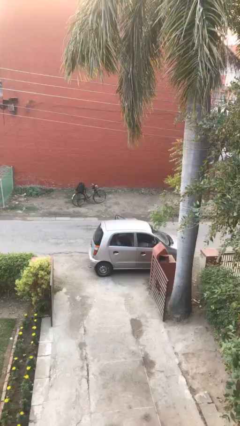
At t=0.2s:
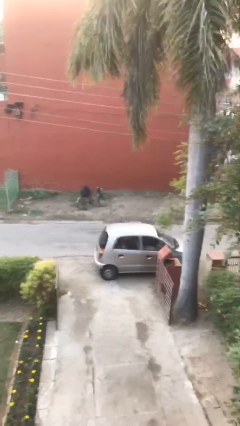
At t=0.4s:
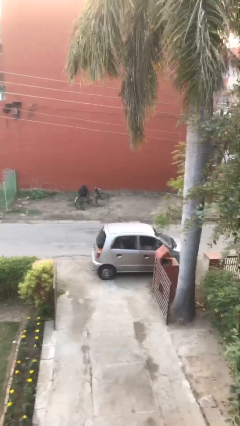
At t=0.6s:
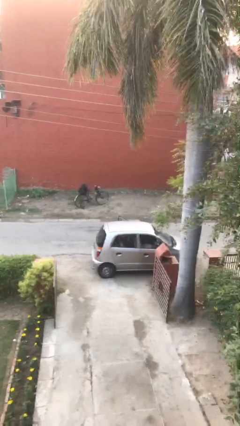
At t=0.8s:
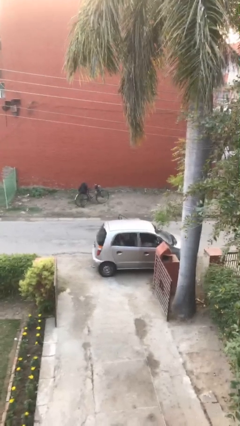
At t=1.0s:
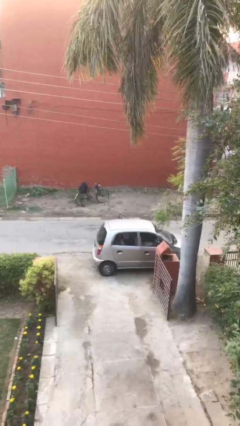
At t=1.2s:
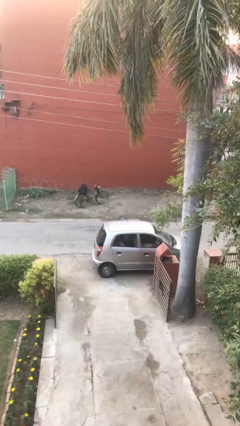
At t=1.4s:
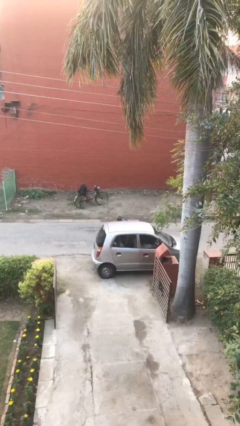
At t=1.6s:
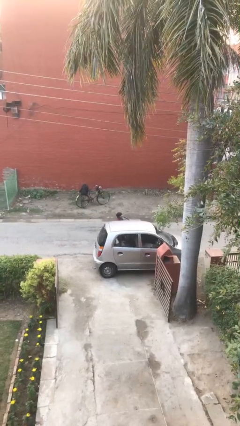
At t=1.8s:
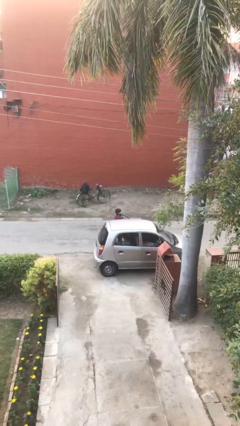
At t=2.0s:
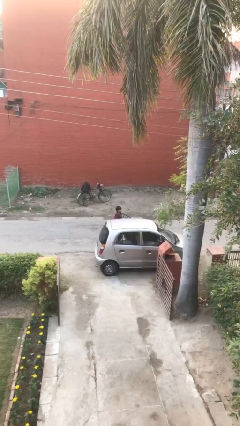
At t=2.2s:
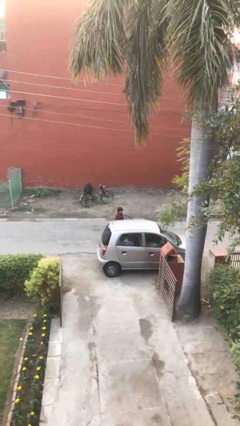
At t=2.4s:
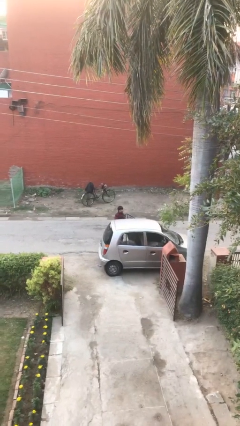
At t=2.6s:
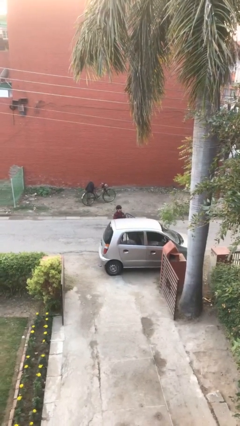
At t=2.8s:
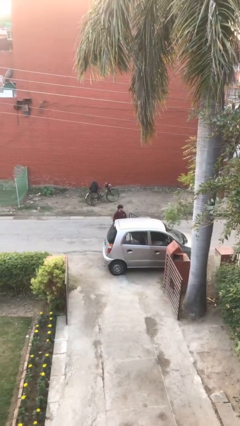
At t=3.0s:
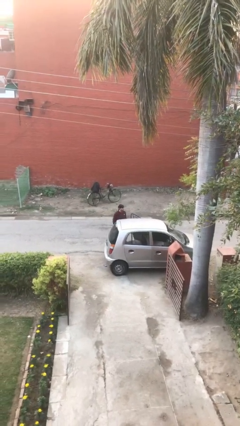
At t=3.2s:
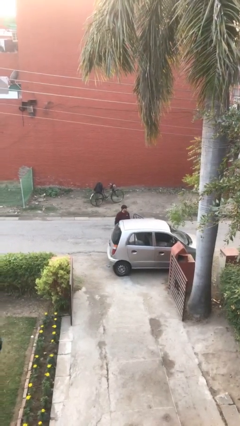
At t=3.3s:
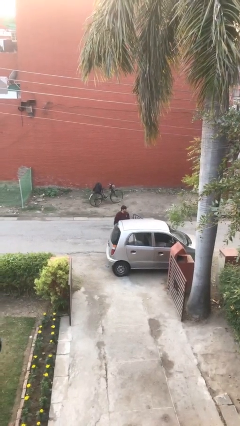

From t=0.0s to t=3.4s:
person exits car

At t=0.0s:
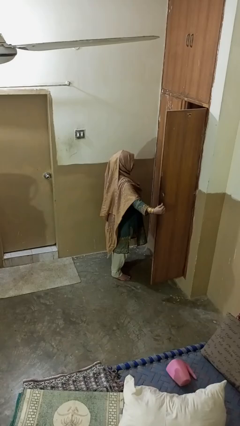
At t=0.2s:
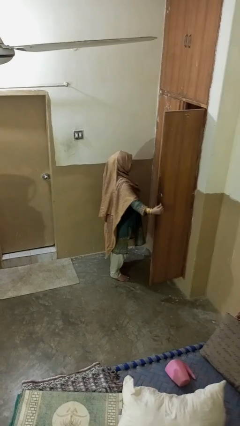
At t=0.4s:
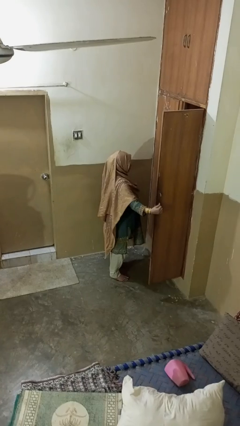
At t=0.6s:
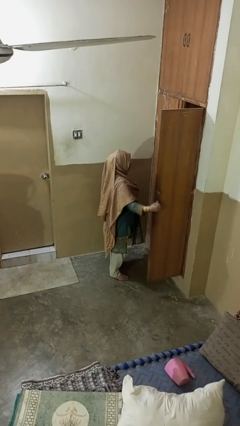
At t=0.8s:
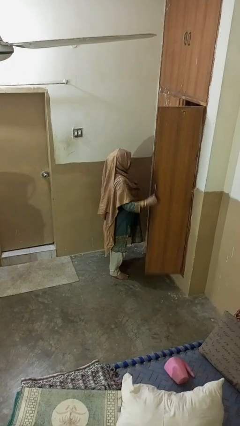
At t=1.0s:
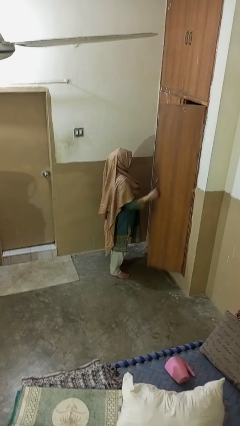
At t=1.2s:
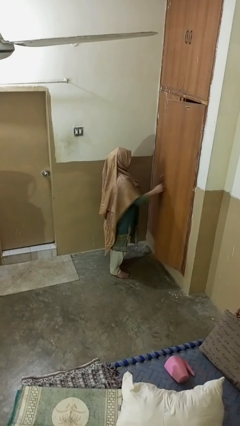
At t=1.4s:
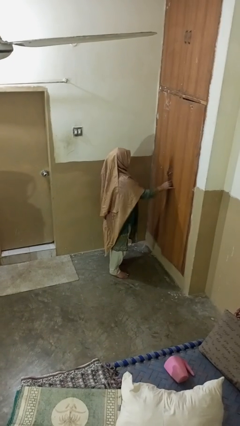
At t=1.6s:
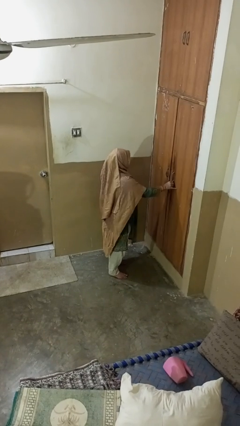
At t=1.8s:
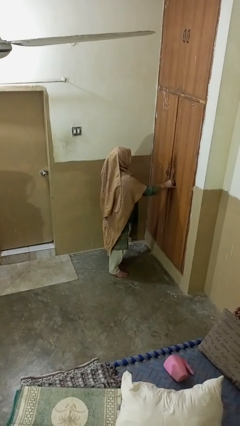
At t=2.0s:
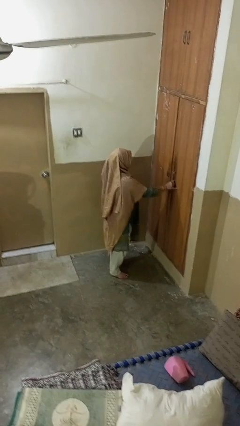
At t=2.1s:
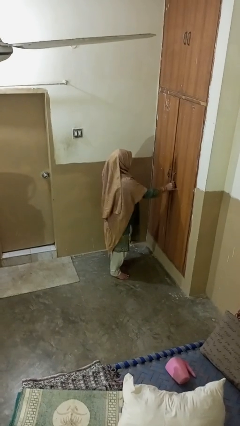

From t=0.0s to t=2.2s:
person closes closet door

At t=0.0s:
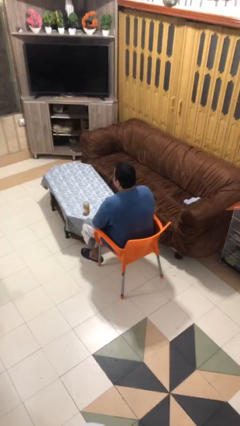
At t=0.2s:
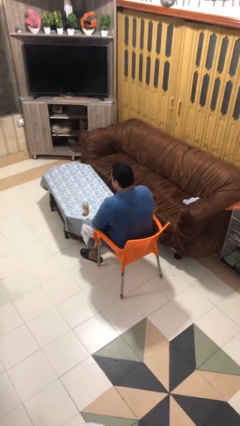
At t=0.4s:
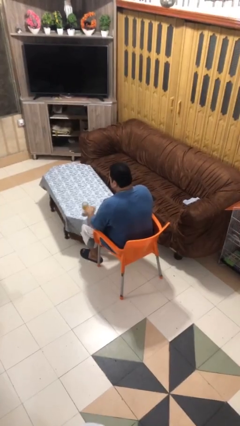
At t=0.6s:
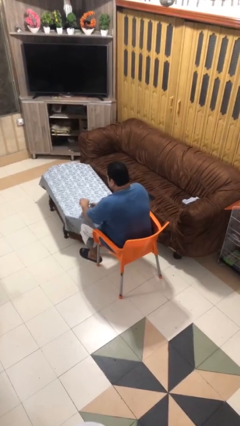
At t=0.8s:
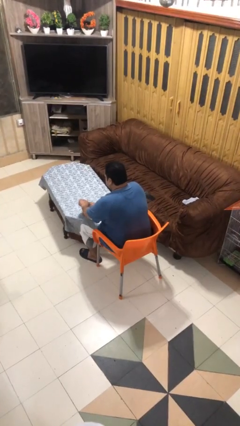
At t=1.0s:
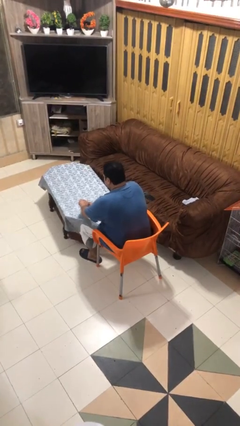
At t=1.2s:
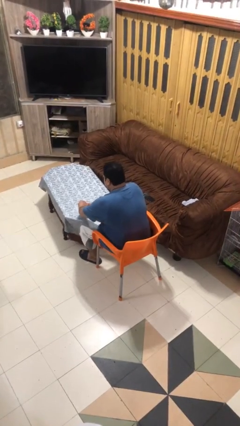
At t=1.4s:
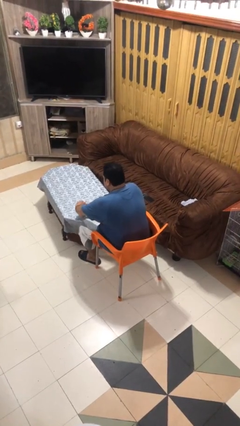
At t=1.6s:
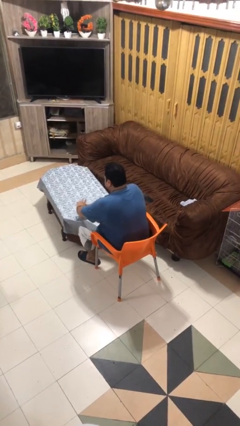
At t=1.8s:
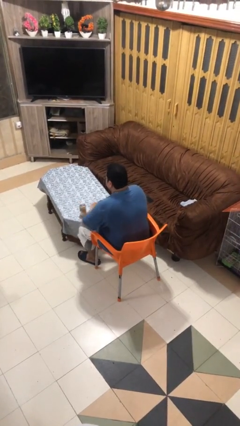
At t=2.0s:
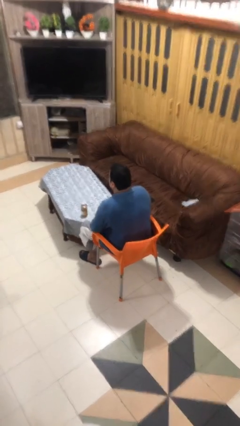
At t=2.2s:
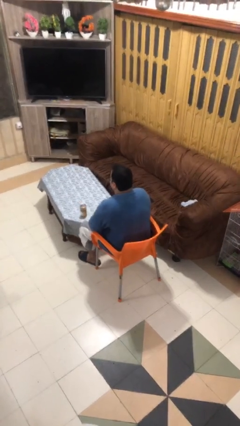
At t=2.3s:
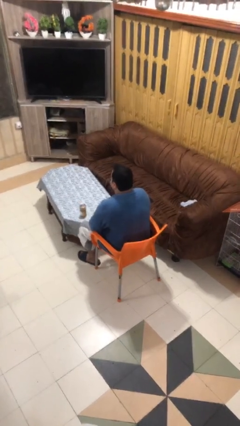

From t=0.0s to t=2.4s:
person closes jar

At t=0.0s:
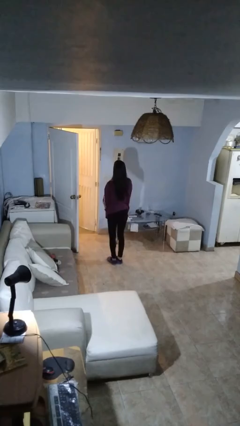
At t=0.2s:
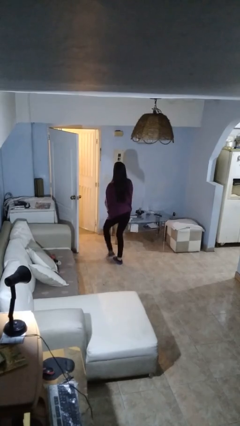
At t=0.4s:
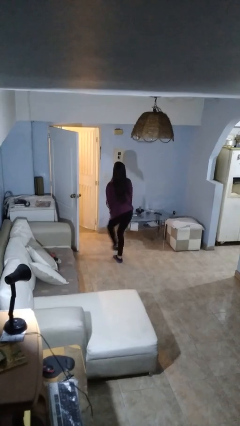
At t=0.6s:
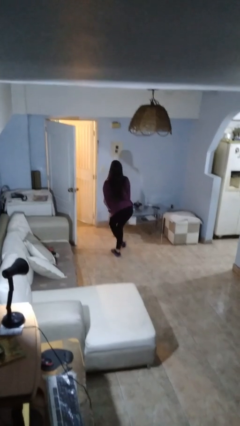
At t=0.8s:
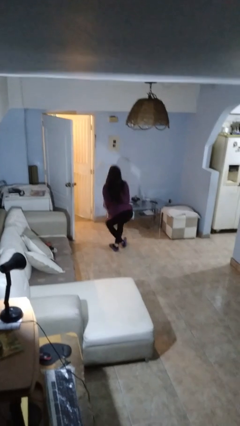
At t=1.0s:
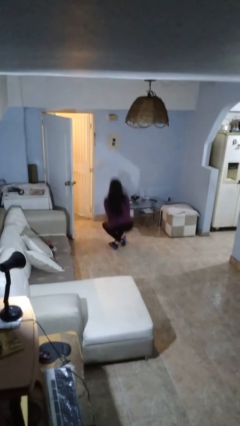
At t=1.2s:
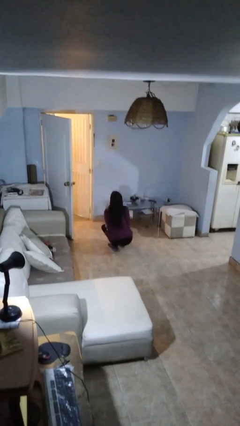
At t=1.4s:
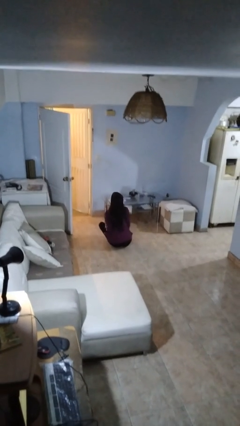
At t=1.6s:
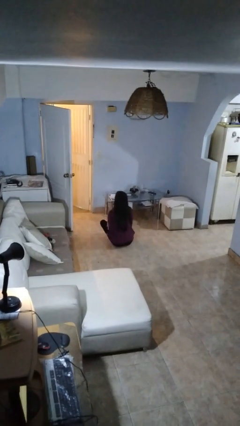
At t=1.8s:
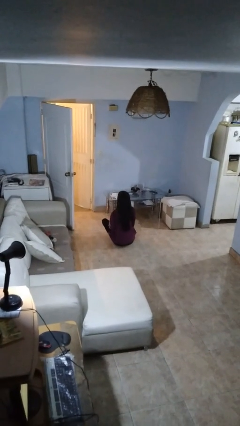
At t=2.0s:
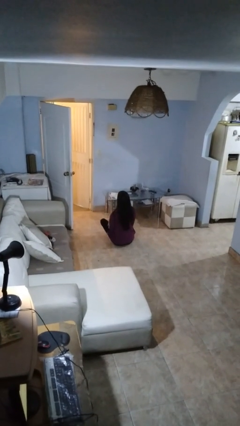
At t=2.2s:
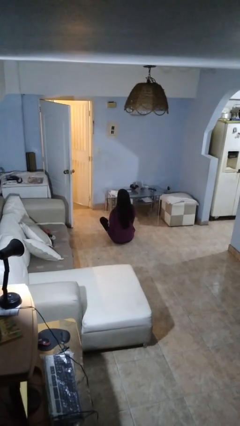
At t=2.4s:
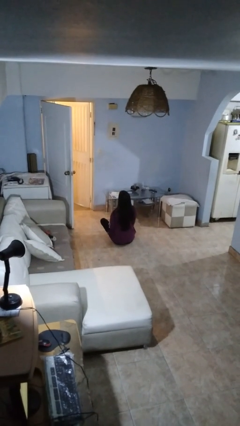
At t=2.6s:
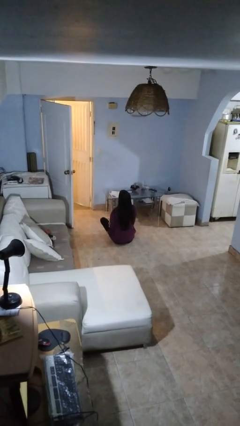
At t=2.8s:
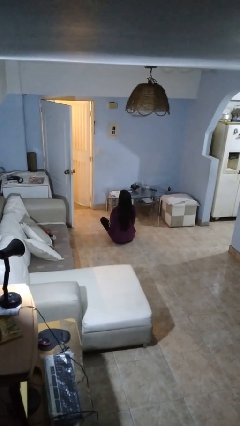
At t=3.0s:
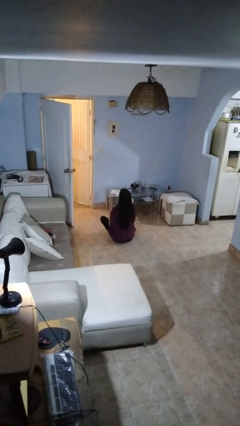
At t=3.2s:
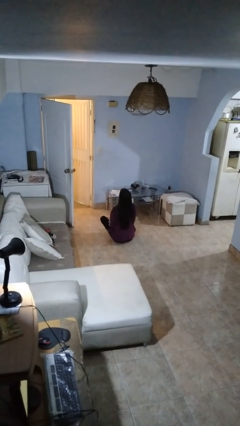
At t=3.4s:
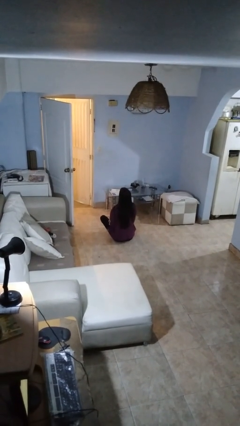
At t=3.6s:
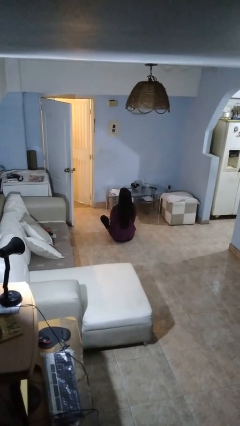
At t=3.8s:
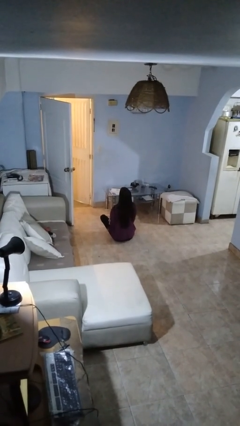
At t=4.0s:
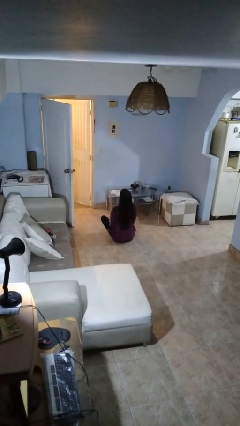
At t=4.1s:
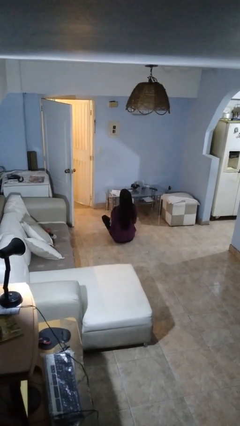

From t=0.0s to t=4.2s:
person sits crisscross

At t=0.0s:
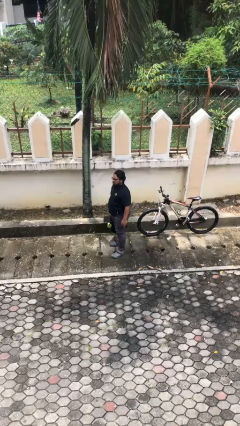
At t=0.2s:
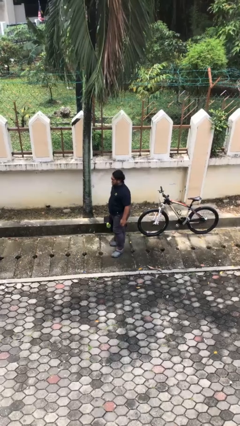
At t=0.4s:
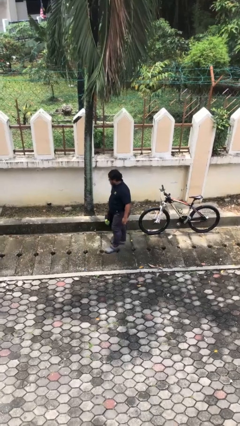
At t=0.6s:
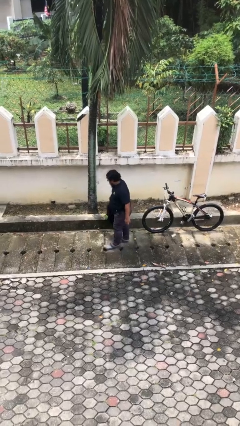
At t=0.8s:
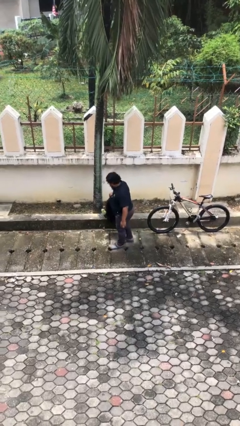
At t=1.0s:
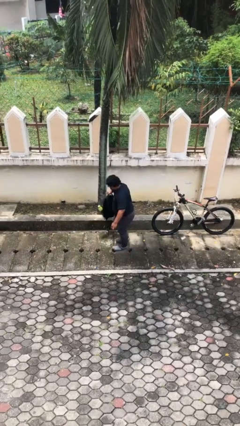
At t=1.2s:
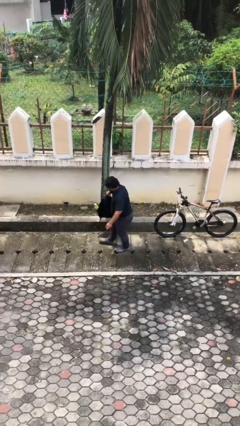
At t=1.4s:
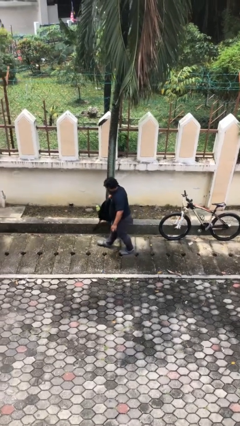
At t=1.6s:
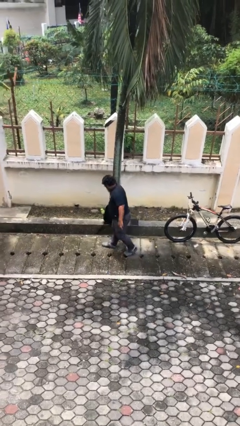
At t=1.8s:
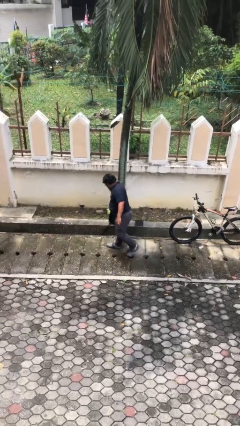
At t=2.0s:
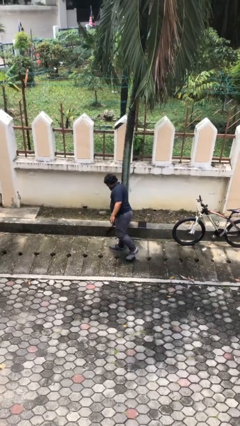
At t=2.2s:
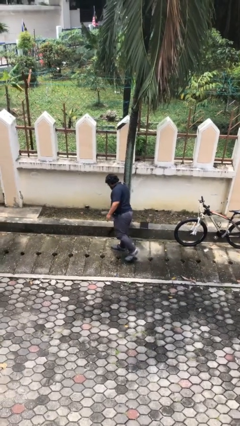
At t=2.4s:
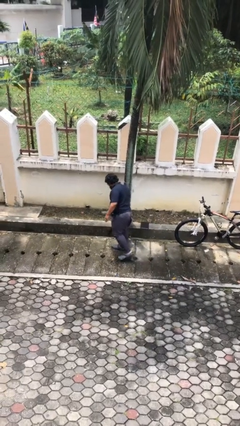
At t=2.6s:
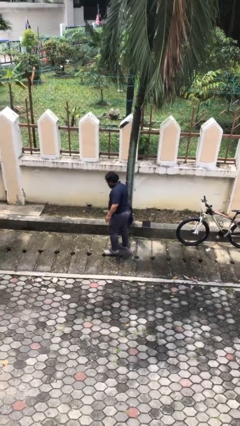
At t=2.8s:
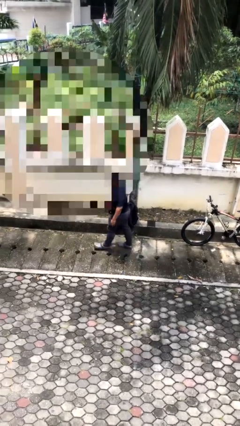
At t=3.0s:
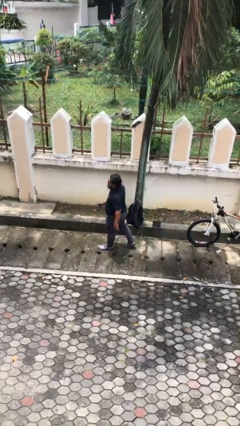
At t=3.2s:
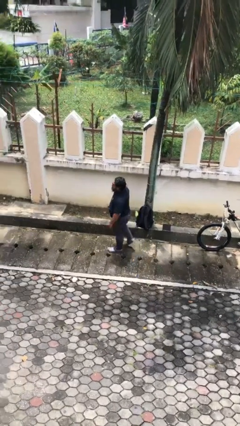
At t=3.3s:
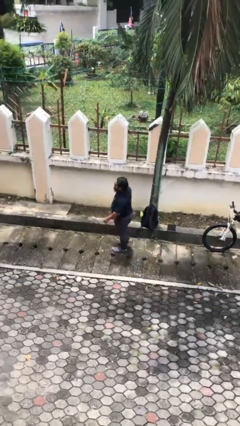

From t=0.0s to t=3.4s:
person puts down object on floor

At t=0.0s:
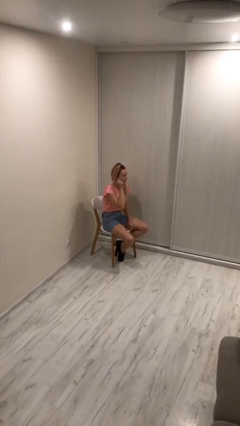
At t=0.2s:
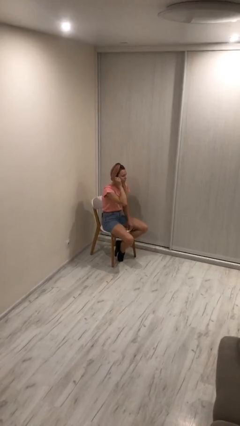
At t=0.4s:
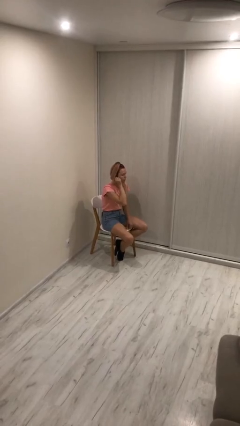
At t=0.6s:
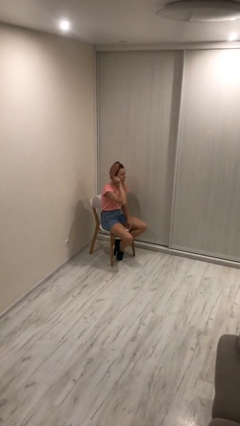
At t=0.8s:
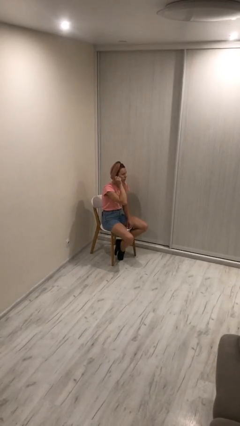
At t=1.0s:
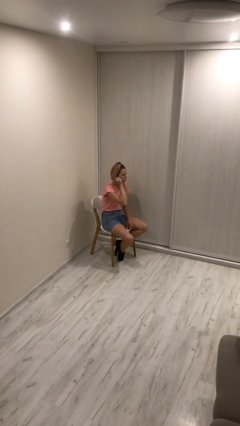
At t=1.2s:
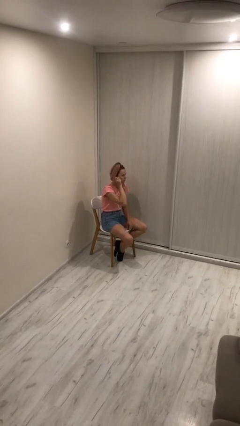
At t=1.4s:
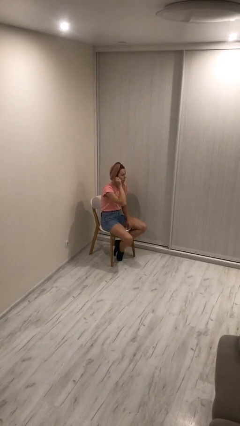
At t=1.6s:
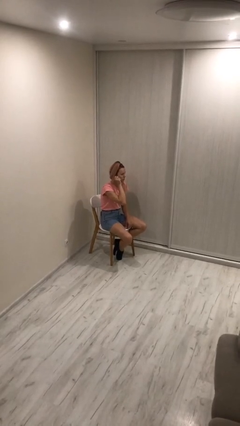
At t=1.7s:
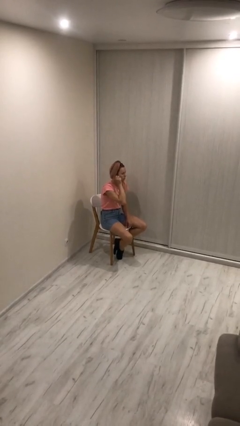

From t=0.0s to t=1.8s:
person touches earlobe

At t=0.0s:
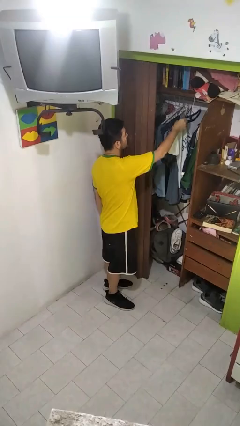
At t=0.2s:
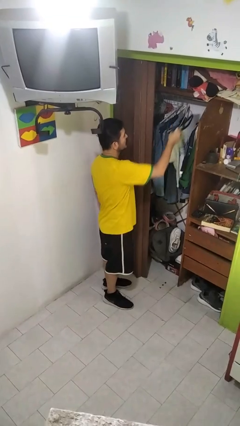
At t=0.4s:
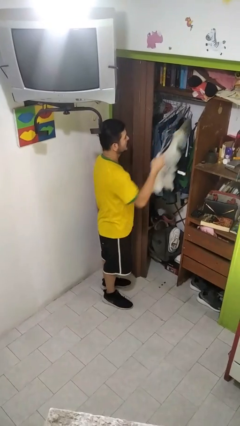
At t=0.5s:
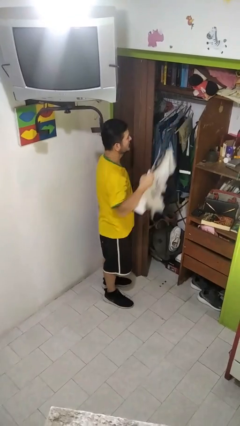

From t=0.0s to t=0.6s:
person takes clothes from closet
